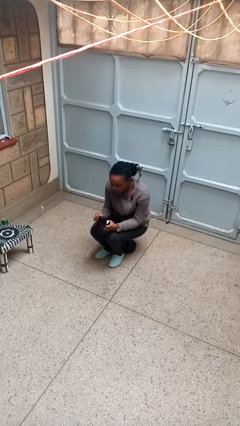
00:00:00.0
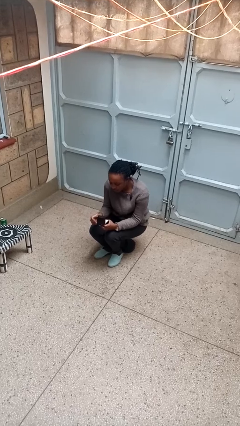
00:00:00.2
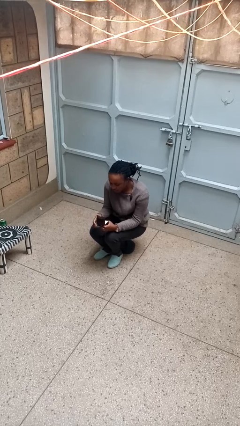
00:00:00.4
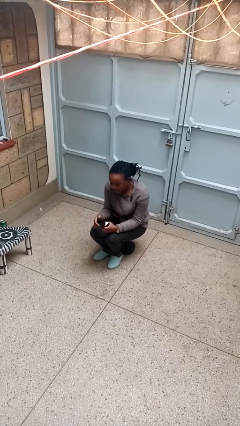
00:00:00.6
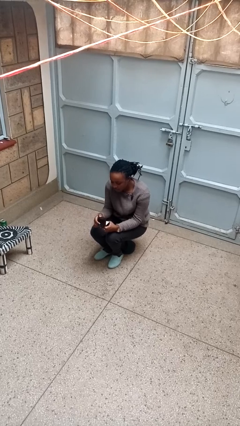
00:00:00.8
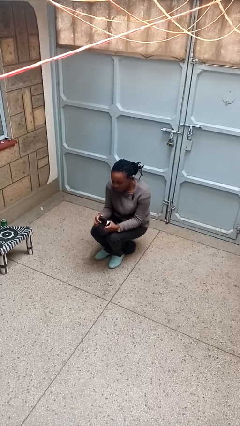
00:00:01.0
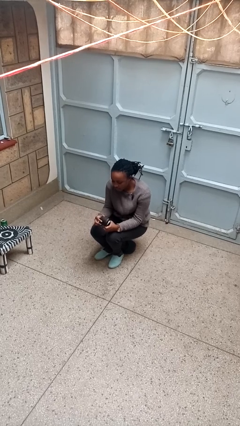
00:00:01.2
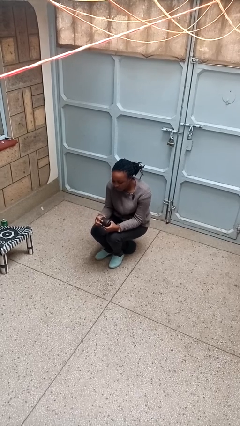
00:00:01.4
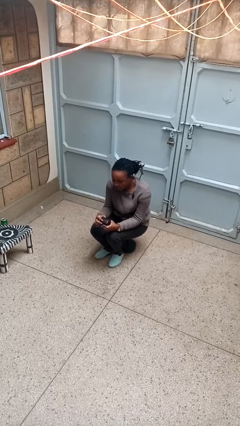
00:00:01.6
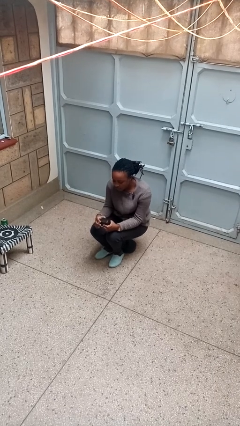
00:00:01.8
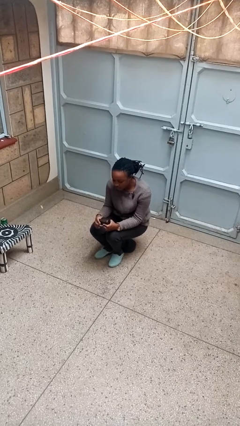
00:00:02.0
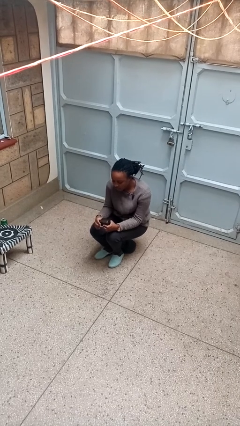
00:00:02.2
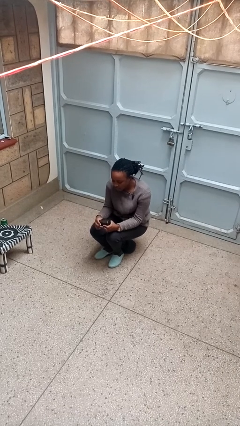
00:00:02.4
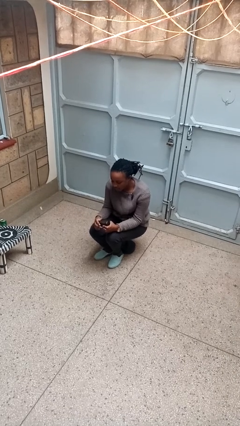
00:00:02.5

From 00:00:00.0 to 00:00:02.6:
person closes jewelry box

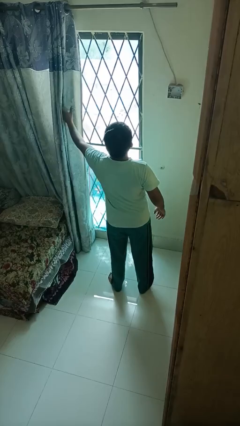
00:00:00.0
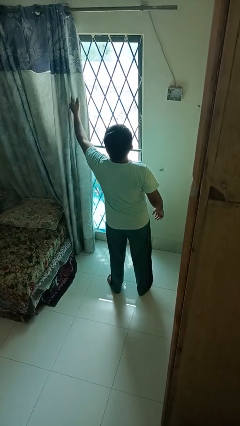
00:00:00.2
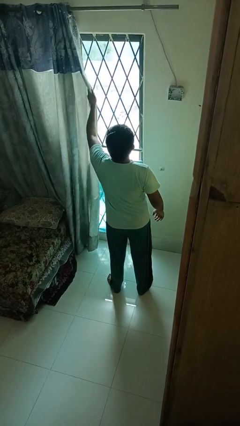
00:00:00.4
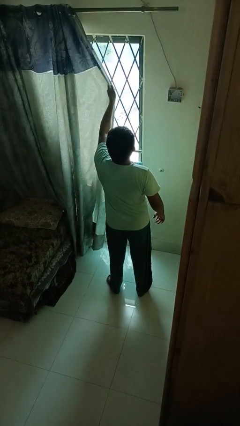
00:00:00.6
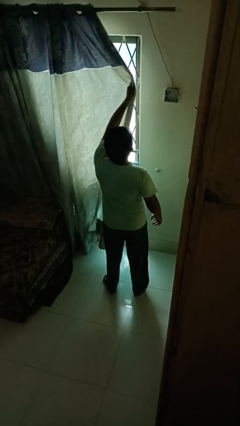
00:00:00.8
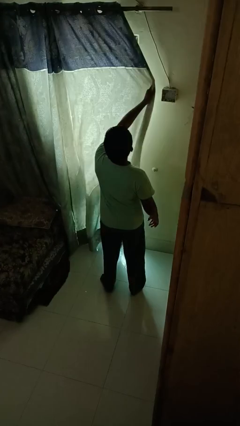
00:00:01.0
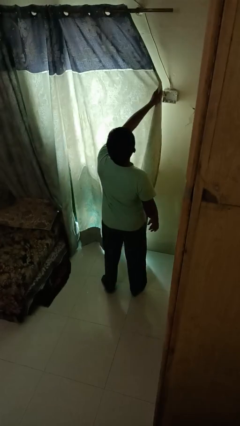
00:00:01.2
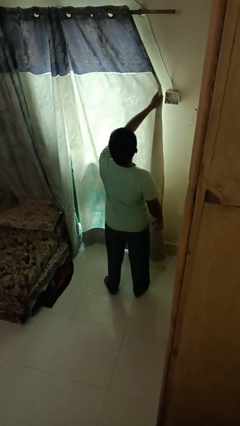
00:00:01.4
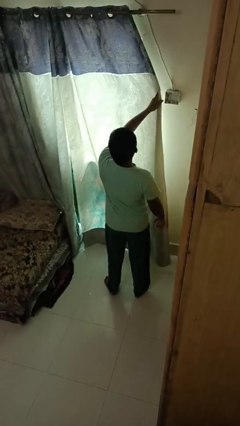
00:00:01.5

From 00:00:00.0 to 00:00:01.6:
person closes curtains

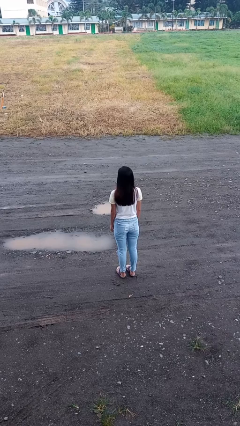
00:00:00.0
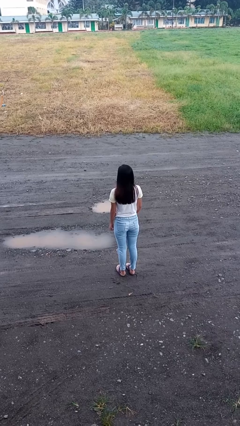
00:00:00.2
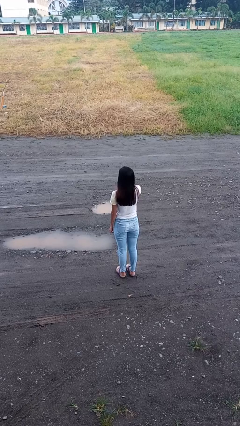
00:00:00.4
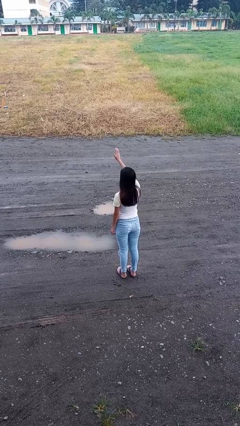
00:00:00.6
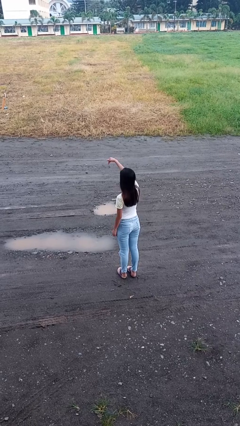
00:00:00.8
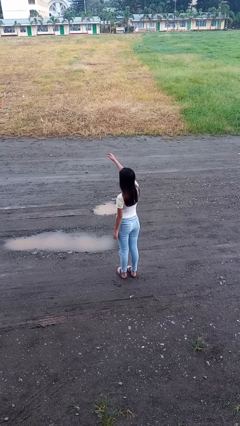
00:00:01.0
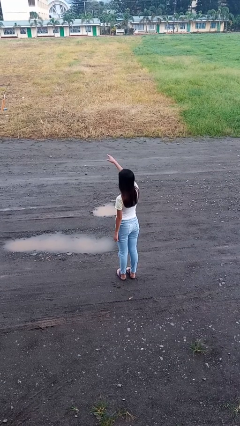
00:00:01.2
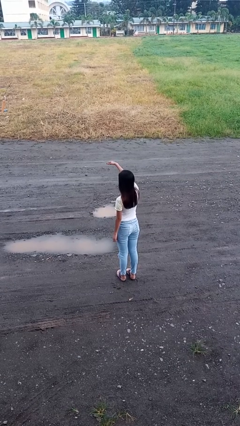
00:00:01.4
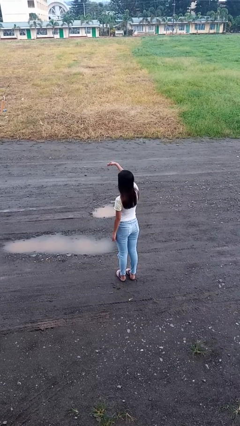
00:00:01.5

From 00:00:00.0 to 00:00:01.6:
person gestures come here

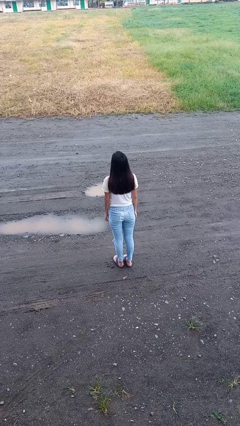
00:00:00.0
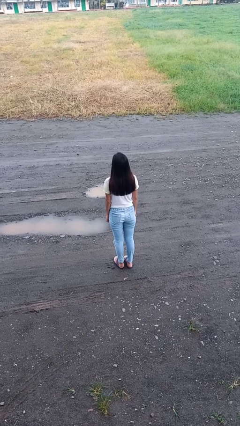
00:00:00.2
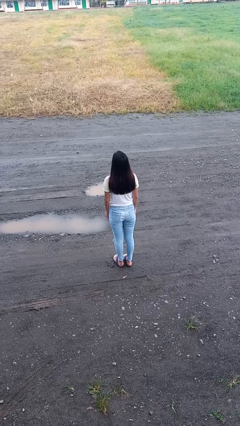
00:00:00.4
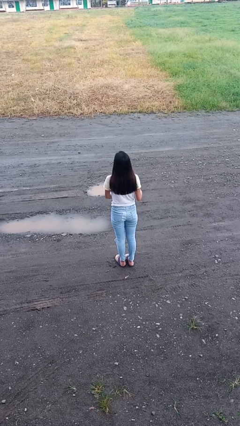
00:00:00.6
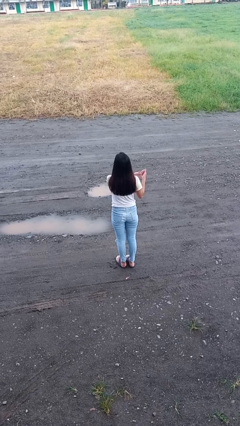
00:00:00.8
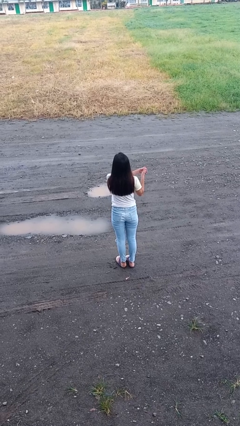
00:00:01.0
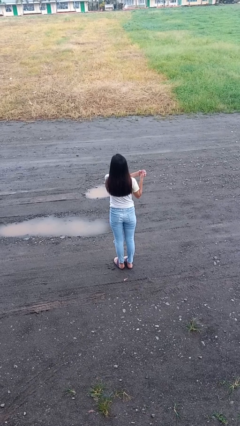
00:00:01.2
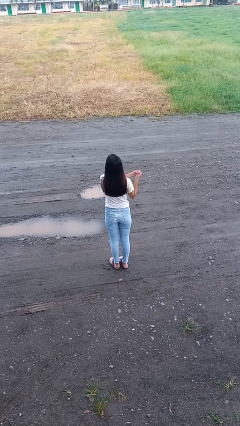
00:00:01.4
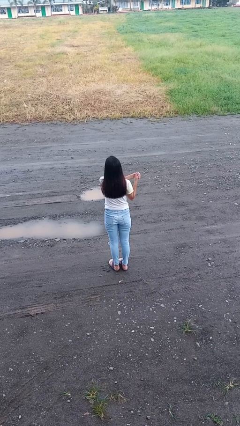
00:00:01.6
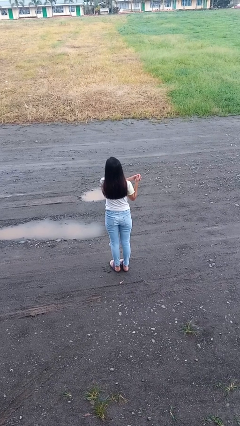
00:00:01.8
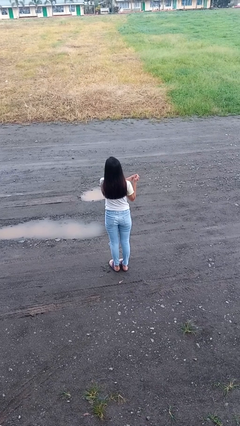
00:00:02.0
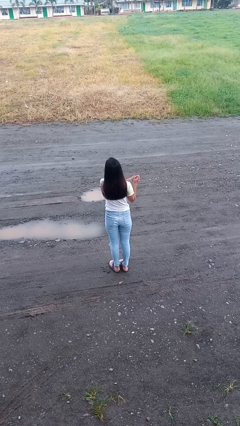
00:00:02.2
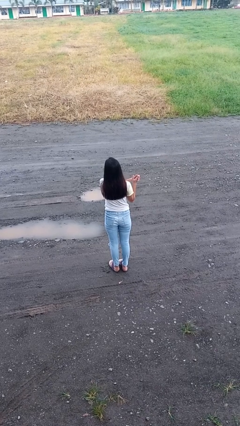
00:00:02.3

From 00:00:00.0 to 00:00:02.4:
person cracks knuckles

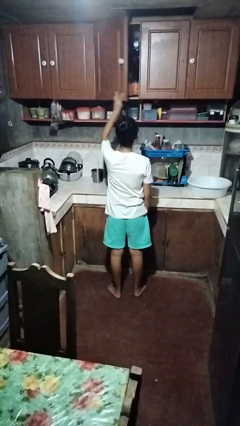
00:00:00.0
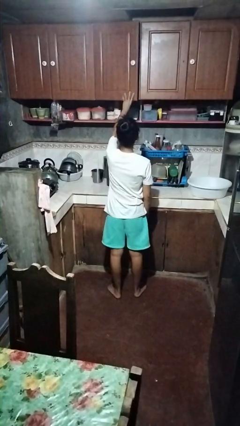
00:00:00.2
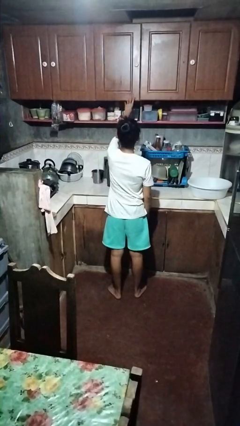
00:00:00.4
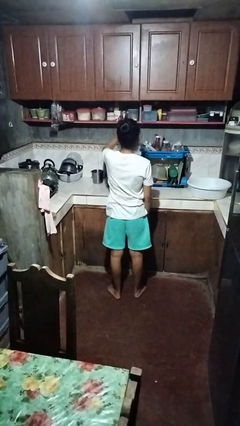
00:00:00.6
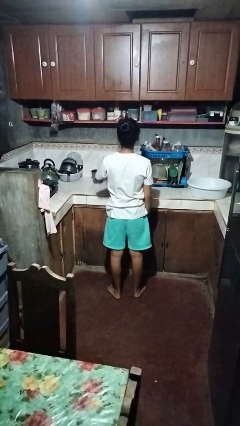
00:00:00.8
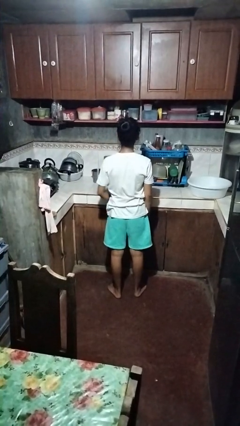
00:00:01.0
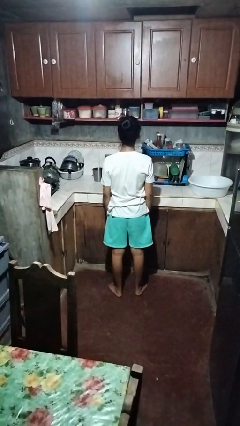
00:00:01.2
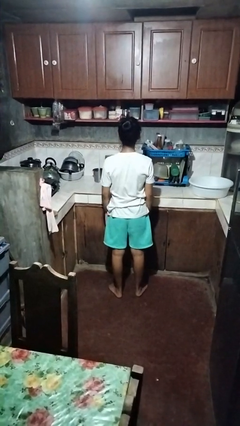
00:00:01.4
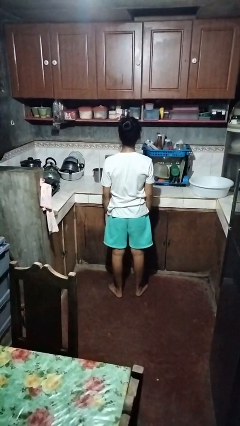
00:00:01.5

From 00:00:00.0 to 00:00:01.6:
person closes cabinet

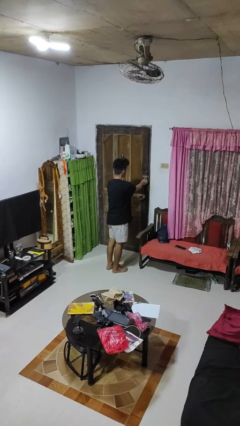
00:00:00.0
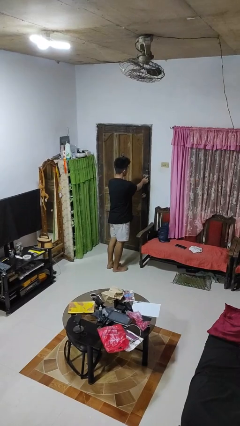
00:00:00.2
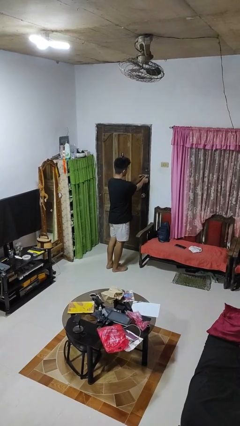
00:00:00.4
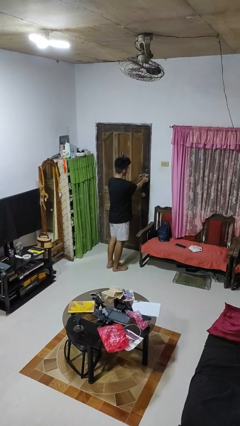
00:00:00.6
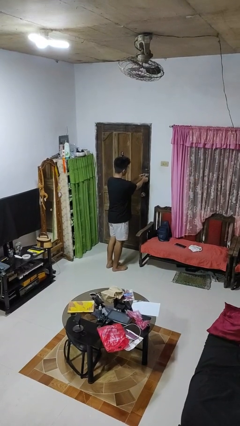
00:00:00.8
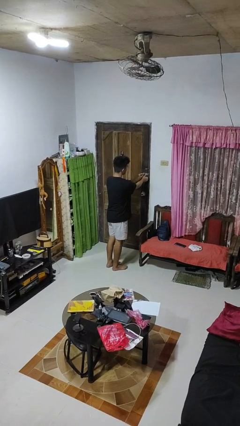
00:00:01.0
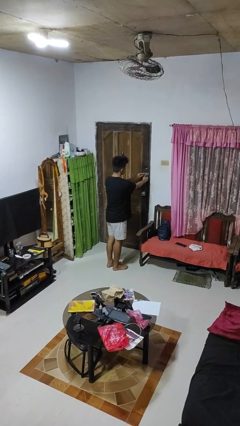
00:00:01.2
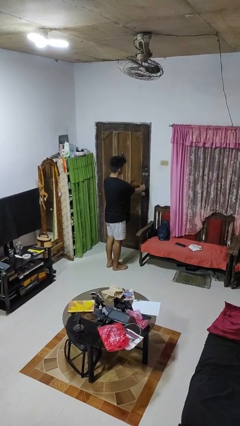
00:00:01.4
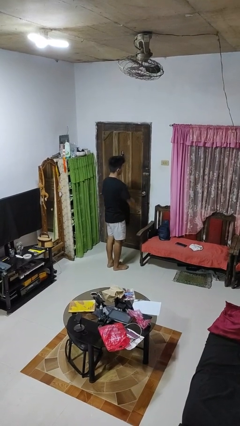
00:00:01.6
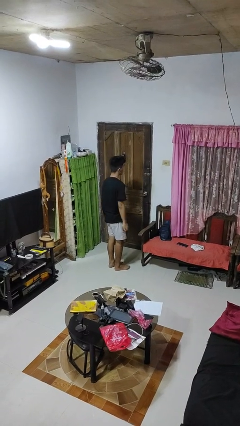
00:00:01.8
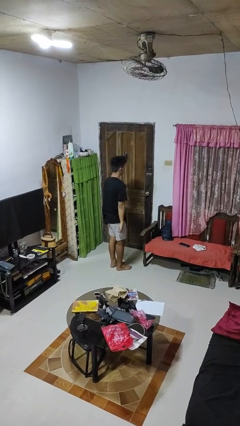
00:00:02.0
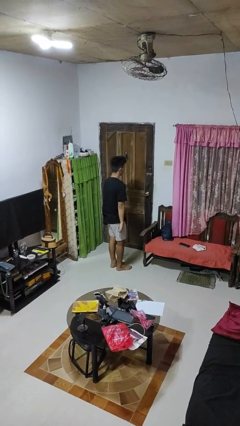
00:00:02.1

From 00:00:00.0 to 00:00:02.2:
person locks door with keys

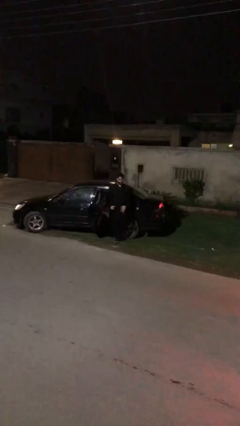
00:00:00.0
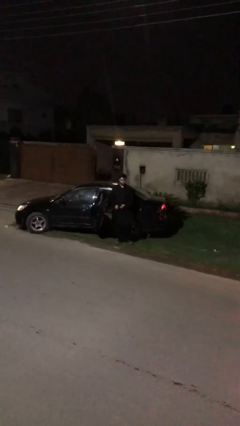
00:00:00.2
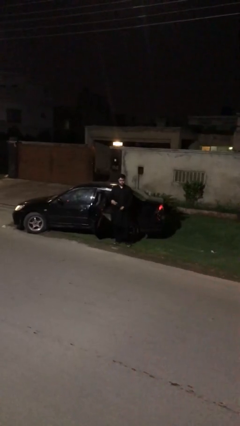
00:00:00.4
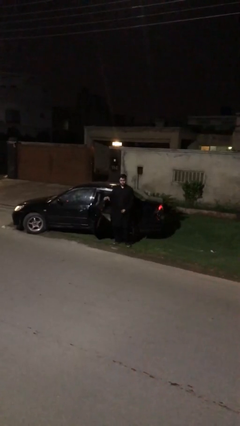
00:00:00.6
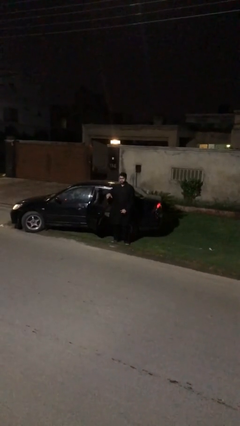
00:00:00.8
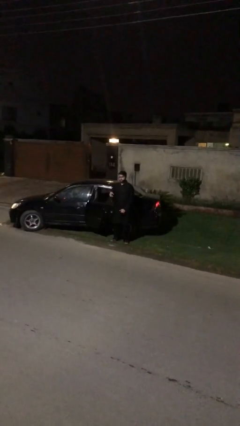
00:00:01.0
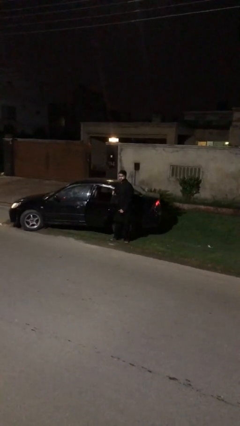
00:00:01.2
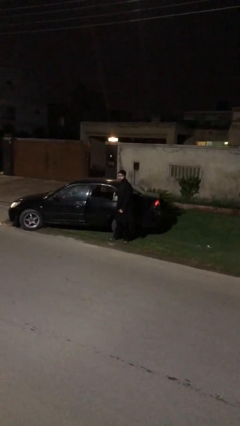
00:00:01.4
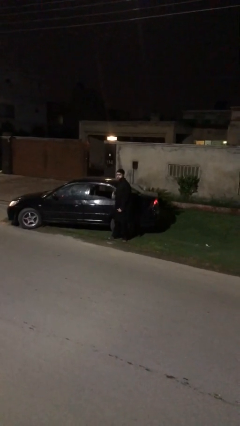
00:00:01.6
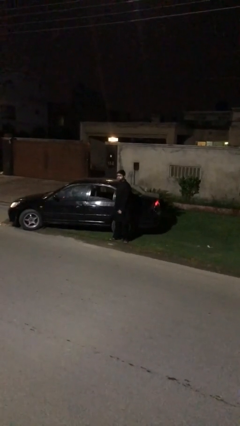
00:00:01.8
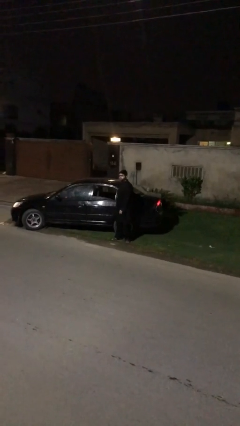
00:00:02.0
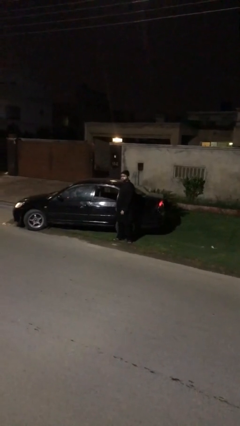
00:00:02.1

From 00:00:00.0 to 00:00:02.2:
person closes car door

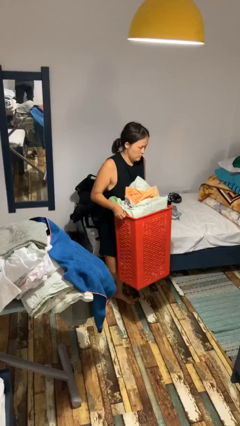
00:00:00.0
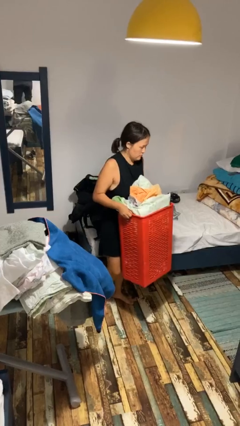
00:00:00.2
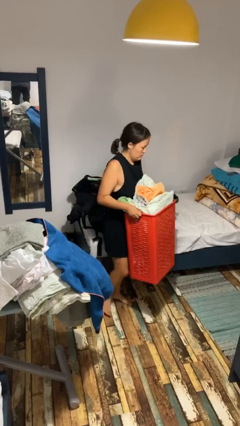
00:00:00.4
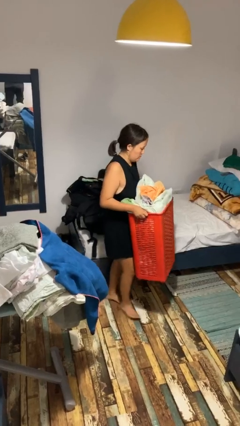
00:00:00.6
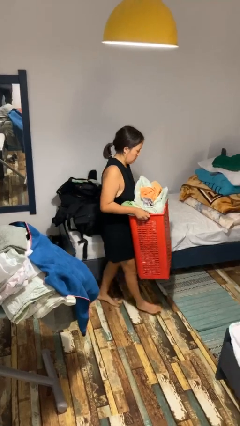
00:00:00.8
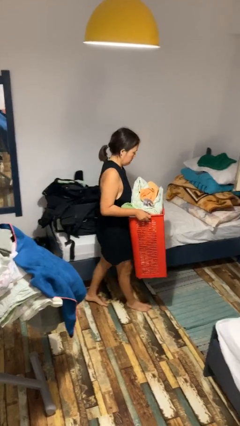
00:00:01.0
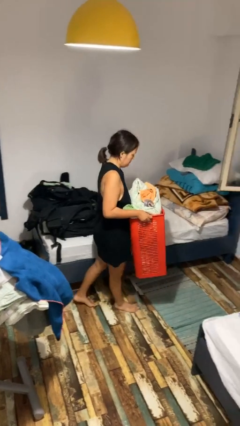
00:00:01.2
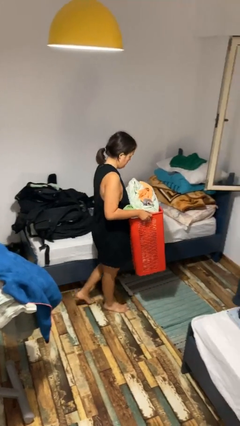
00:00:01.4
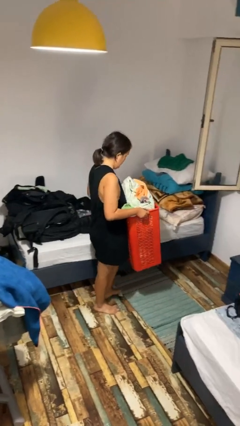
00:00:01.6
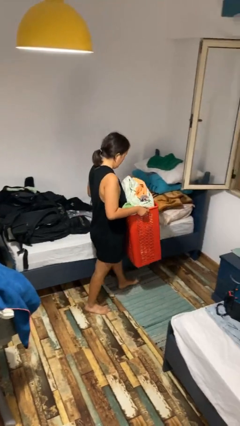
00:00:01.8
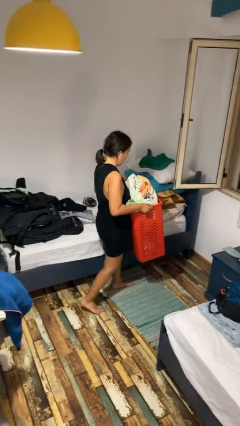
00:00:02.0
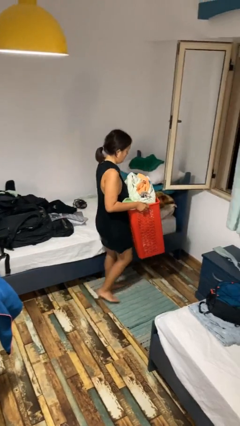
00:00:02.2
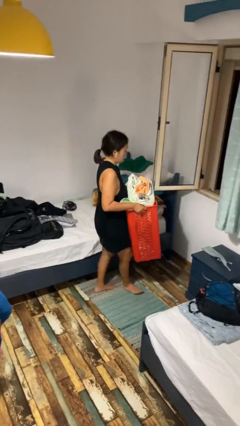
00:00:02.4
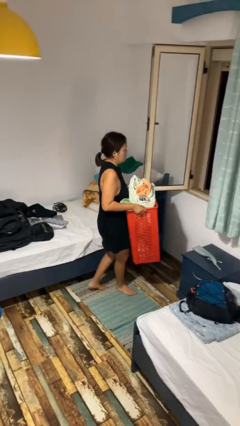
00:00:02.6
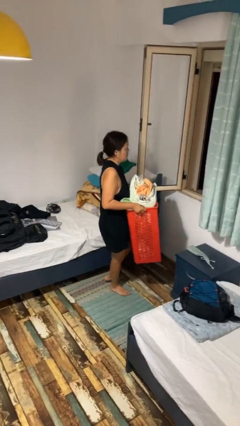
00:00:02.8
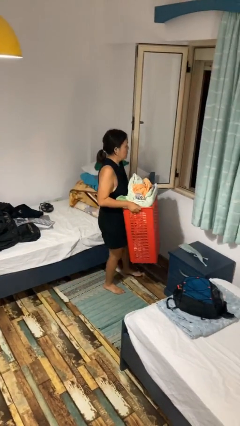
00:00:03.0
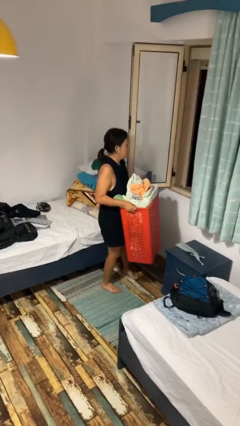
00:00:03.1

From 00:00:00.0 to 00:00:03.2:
person carries laundry basket
